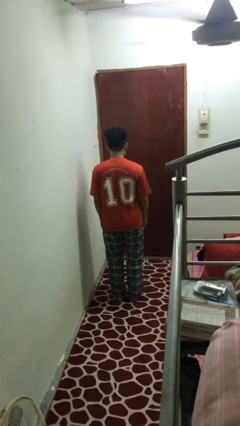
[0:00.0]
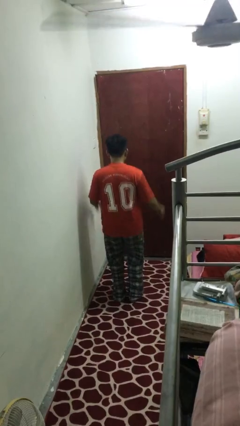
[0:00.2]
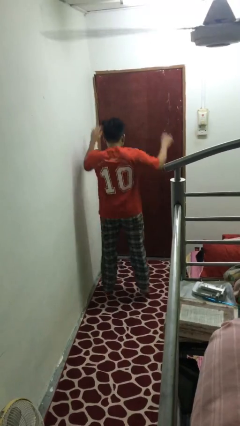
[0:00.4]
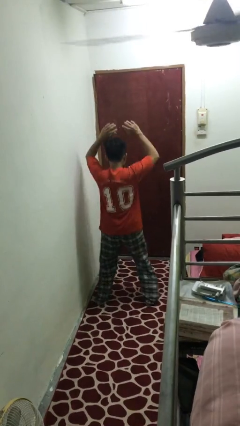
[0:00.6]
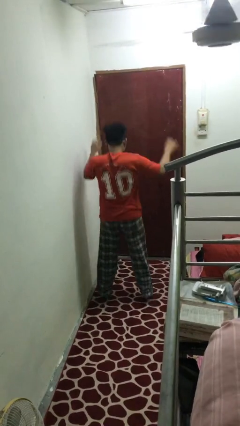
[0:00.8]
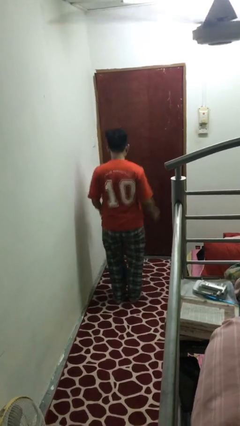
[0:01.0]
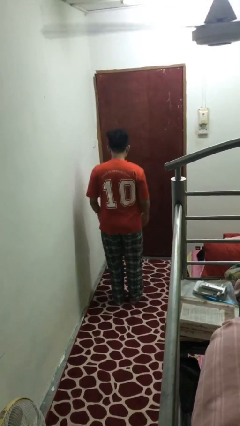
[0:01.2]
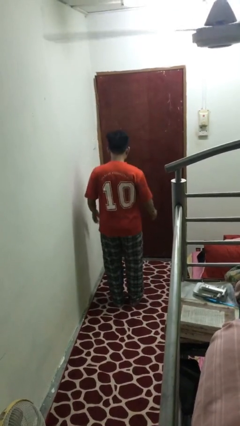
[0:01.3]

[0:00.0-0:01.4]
person exercises with jumping jacks

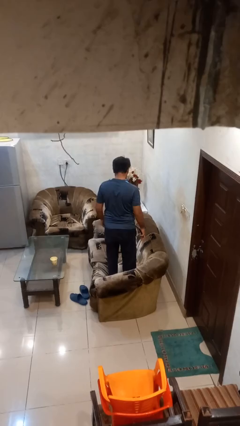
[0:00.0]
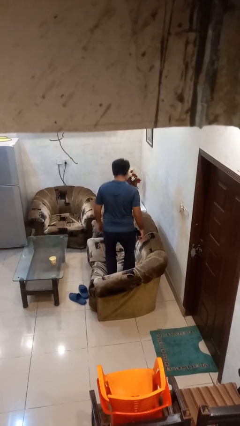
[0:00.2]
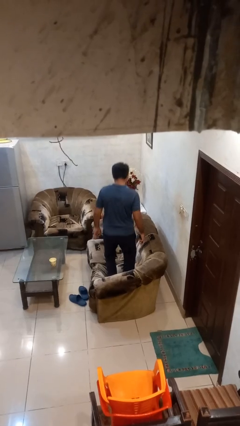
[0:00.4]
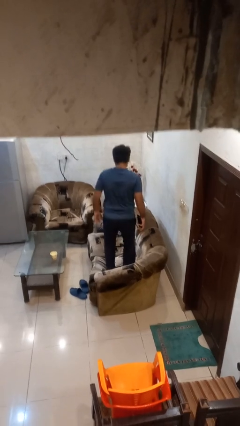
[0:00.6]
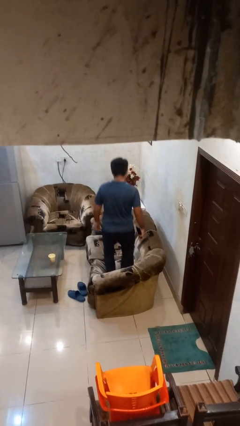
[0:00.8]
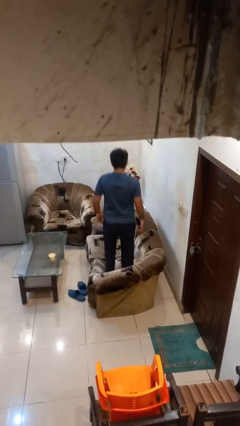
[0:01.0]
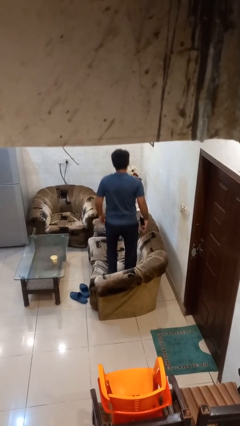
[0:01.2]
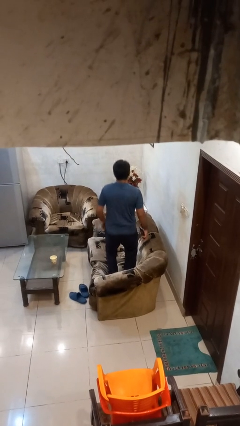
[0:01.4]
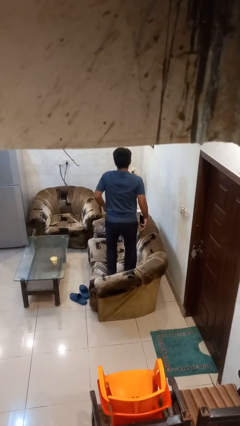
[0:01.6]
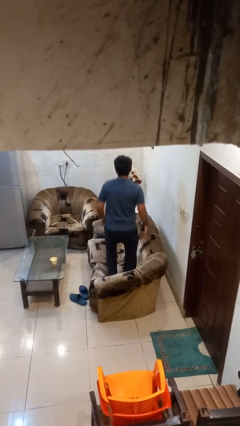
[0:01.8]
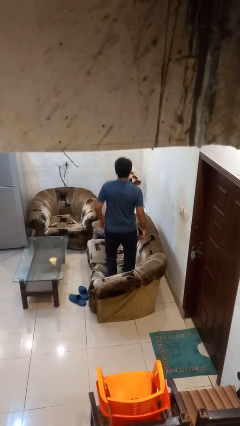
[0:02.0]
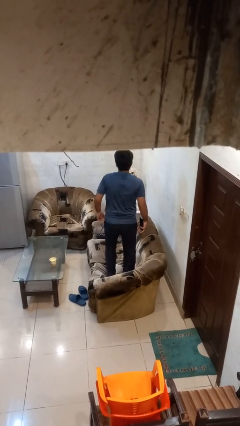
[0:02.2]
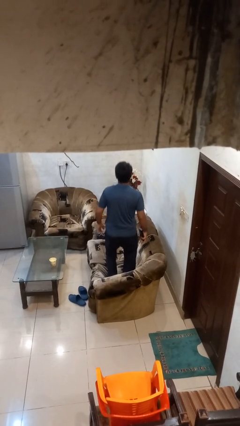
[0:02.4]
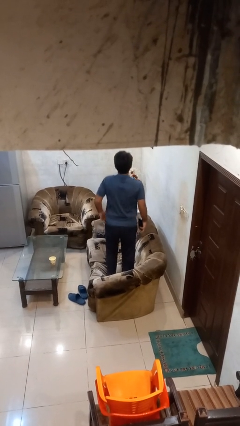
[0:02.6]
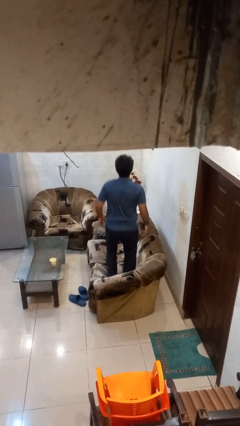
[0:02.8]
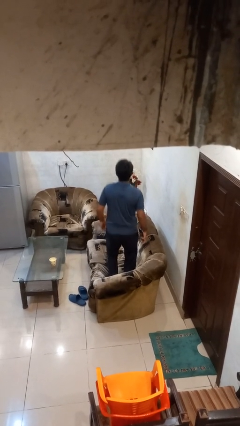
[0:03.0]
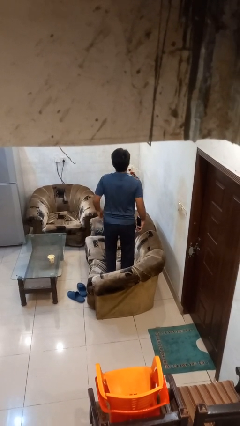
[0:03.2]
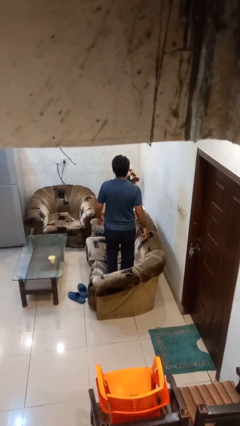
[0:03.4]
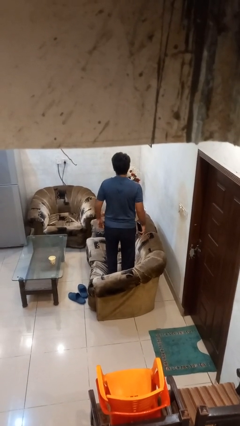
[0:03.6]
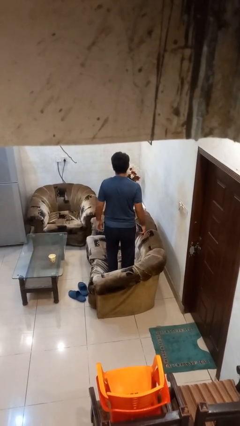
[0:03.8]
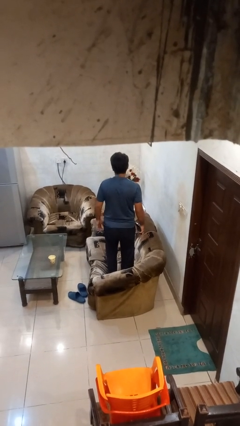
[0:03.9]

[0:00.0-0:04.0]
person jumps on couch

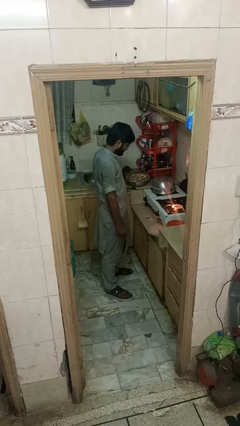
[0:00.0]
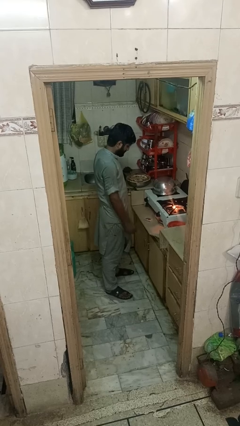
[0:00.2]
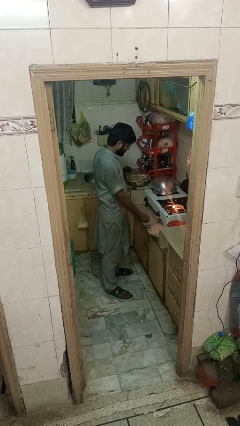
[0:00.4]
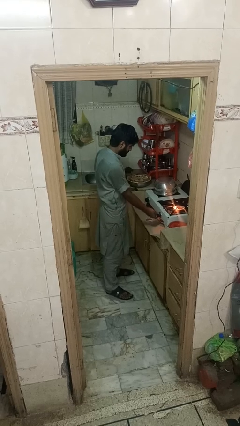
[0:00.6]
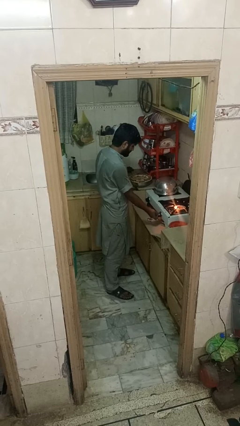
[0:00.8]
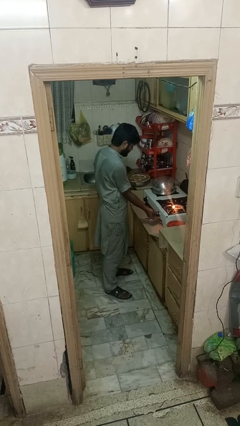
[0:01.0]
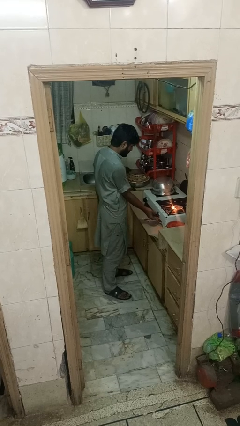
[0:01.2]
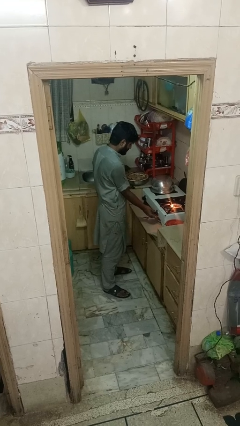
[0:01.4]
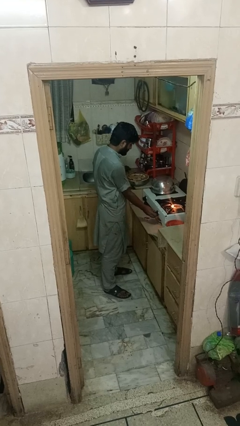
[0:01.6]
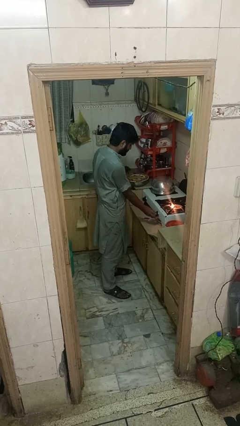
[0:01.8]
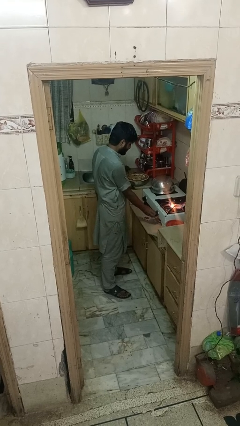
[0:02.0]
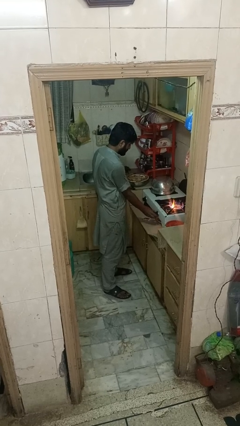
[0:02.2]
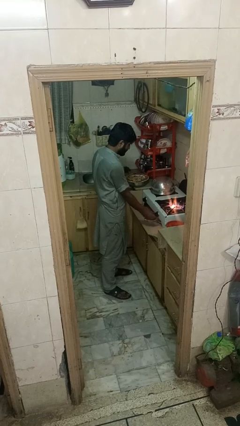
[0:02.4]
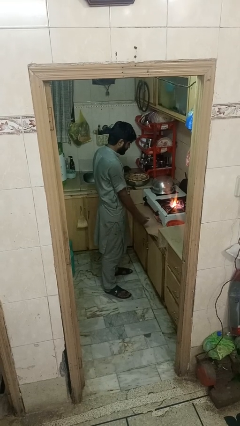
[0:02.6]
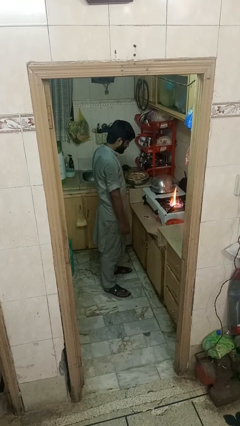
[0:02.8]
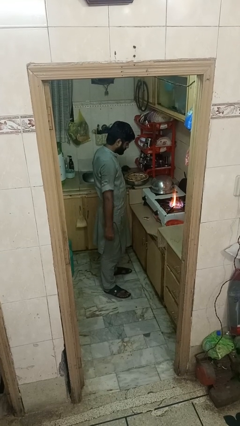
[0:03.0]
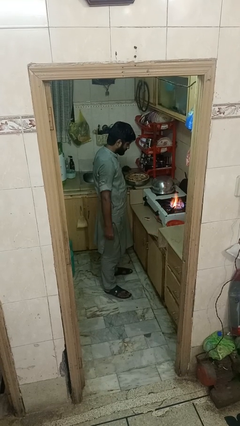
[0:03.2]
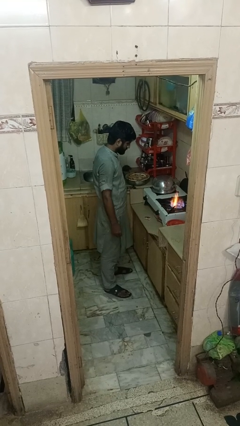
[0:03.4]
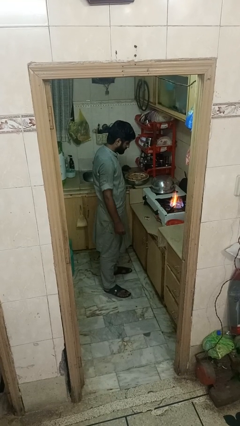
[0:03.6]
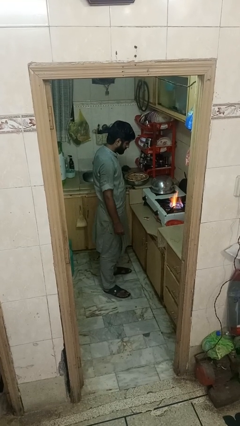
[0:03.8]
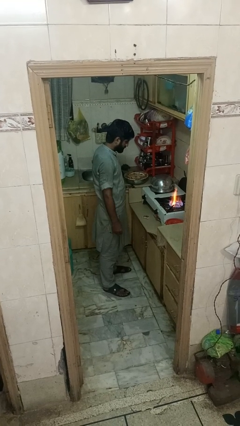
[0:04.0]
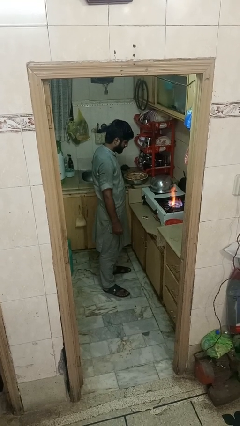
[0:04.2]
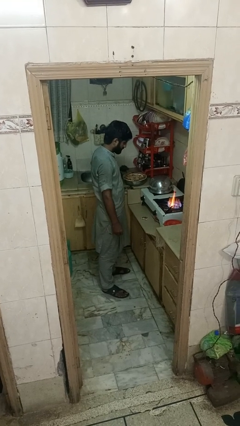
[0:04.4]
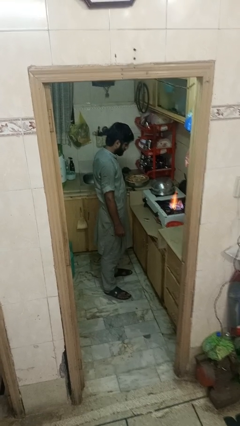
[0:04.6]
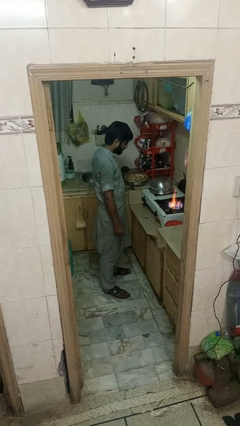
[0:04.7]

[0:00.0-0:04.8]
person turns on stovetop

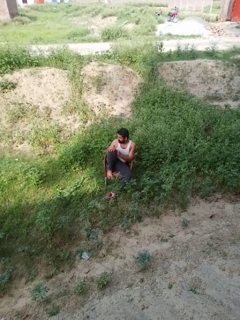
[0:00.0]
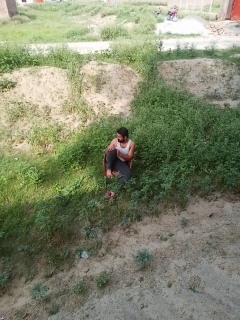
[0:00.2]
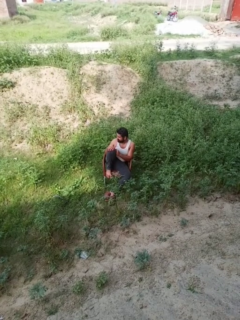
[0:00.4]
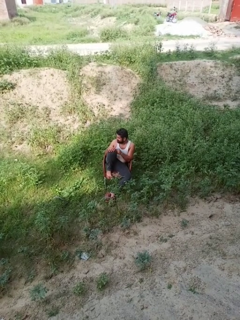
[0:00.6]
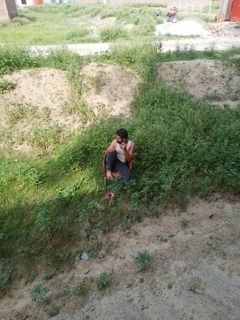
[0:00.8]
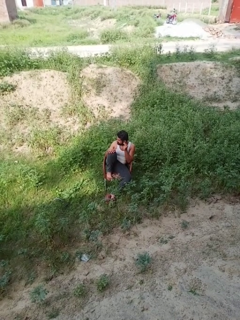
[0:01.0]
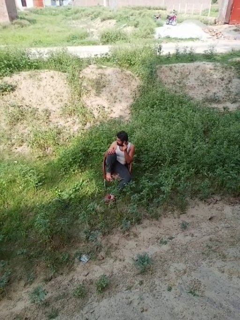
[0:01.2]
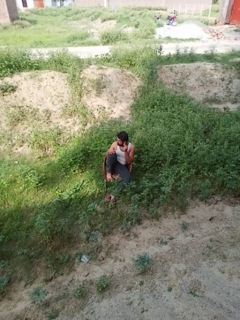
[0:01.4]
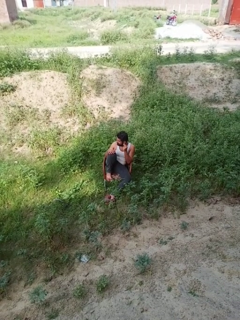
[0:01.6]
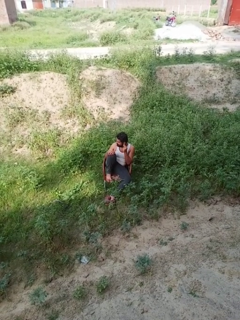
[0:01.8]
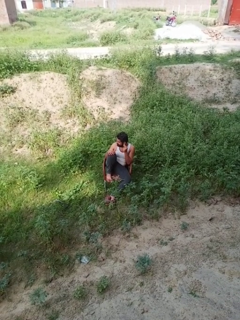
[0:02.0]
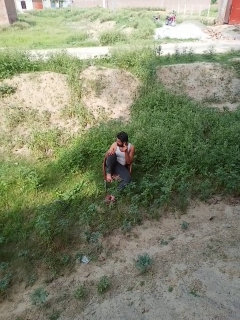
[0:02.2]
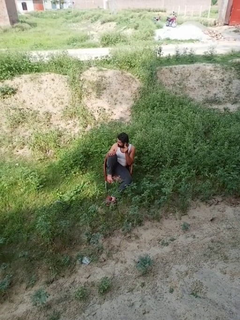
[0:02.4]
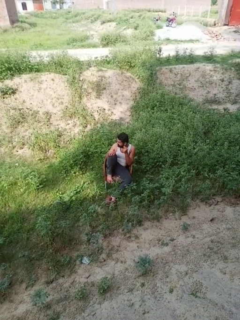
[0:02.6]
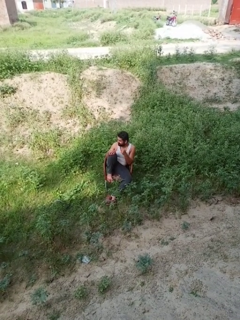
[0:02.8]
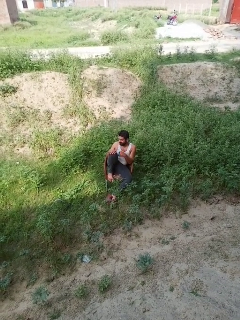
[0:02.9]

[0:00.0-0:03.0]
person touches earlobe

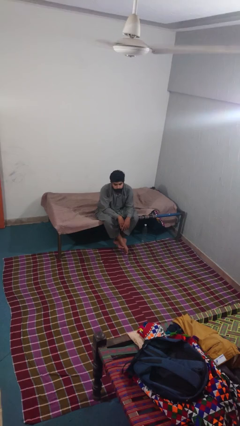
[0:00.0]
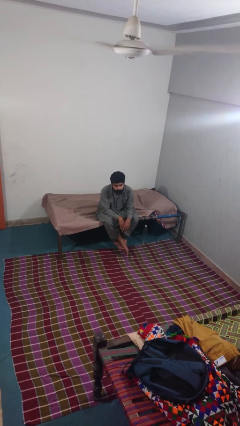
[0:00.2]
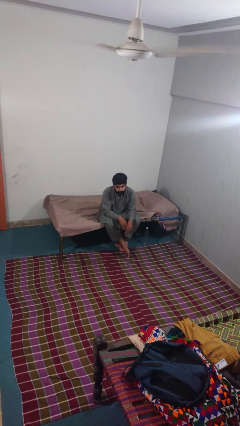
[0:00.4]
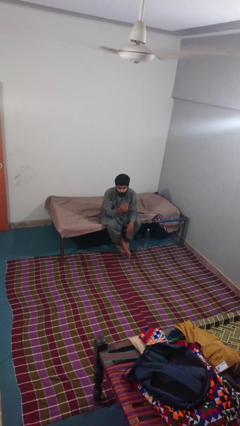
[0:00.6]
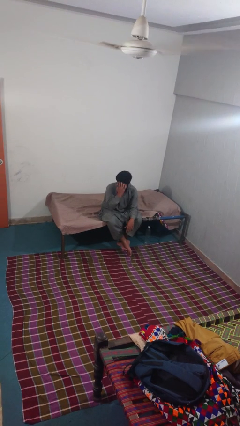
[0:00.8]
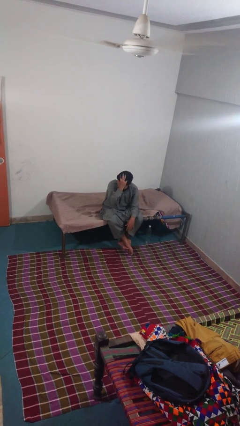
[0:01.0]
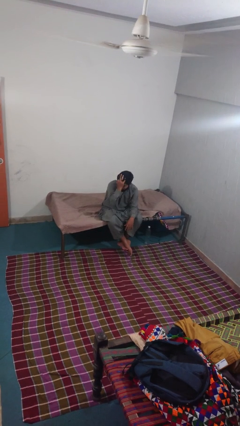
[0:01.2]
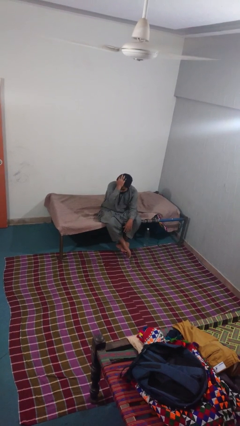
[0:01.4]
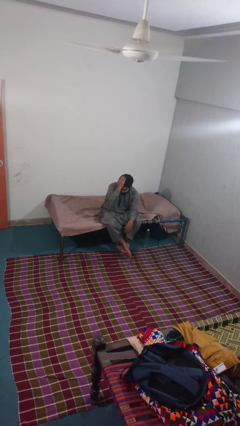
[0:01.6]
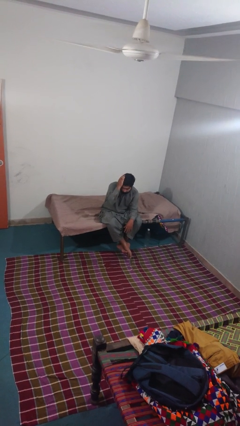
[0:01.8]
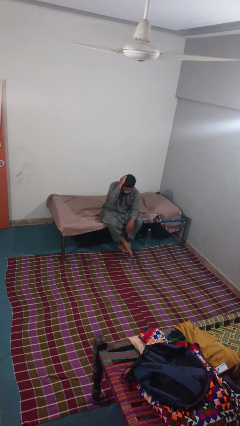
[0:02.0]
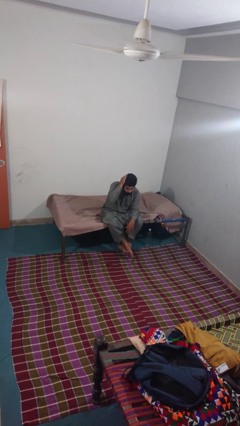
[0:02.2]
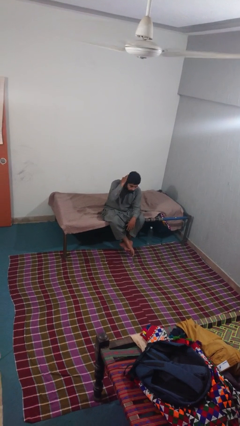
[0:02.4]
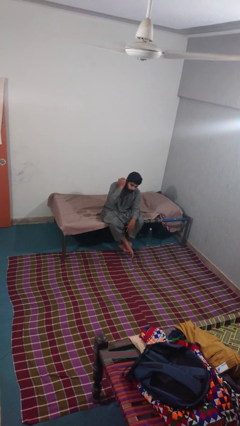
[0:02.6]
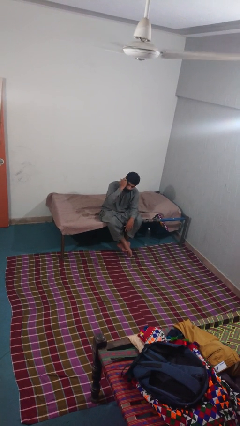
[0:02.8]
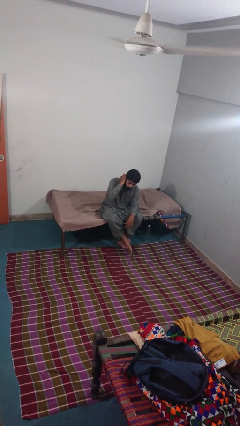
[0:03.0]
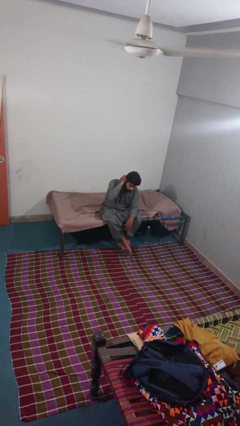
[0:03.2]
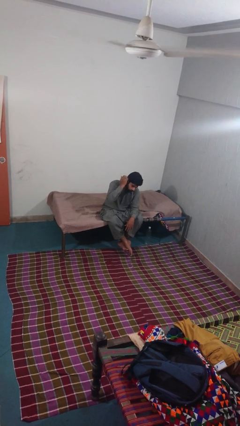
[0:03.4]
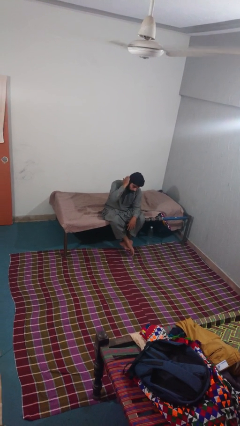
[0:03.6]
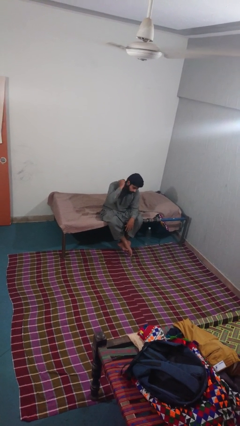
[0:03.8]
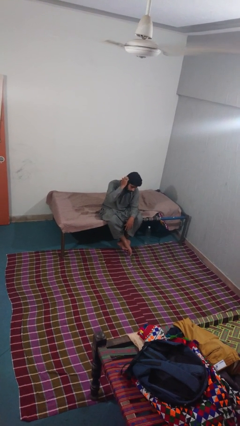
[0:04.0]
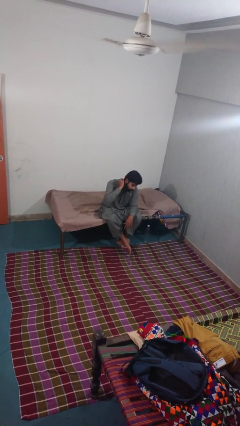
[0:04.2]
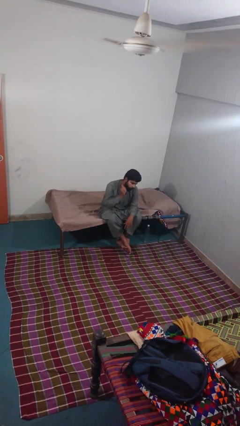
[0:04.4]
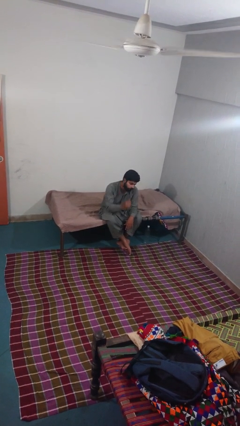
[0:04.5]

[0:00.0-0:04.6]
person strokes hair

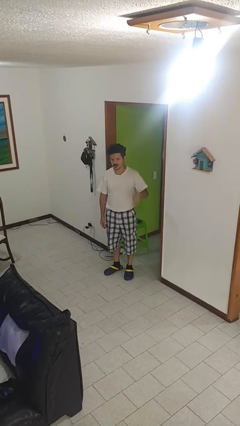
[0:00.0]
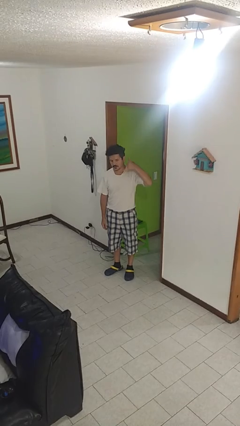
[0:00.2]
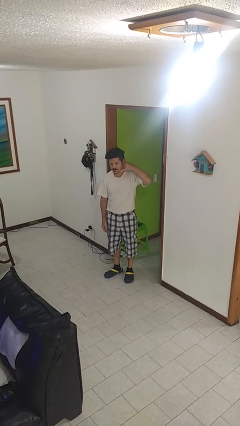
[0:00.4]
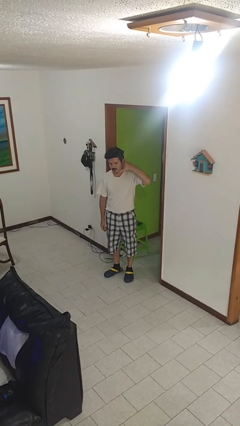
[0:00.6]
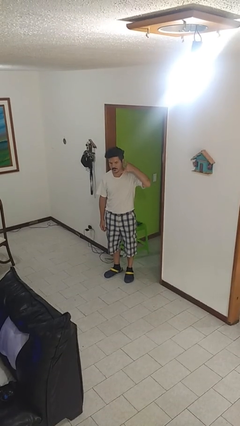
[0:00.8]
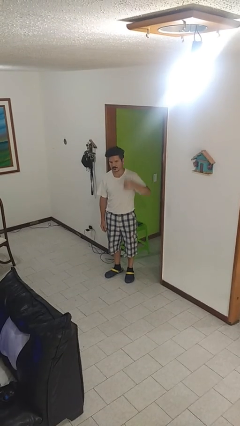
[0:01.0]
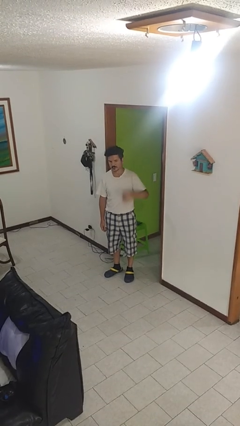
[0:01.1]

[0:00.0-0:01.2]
person gestures call me
